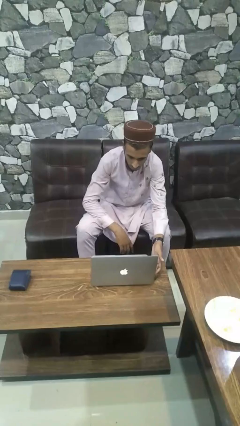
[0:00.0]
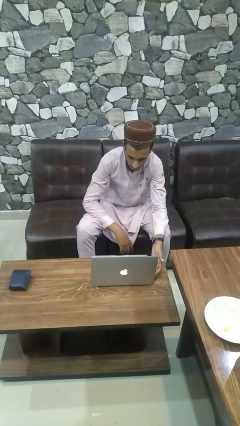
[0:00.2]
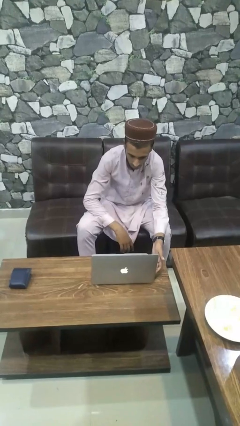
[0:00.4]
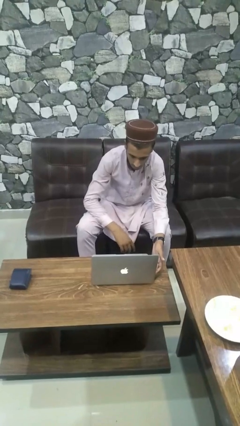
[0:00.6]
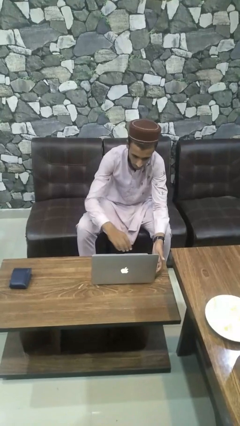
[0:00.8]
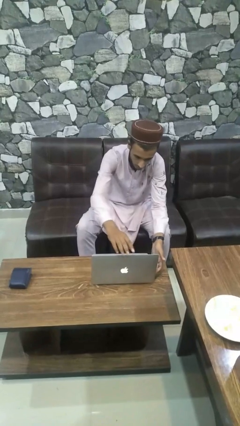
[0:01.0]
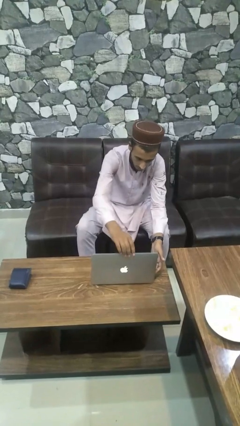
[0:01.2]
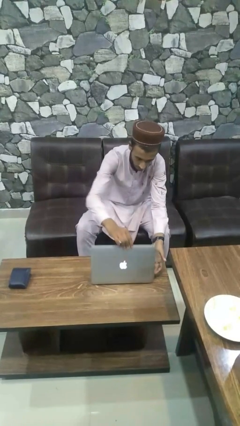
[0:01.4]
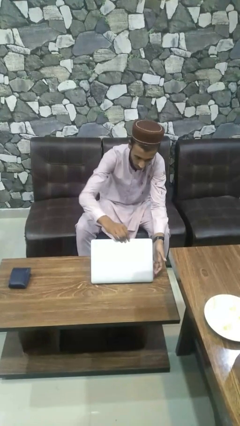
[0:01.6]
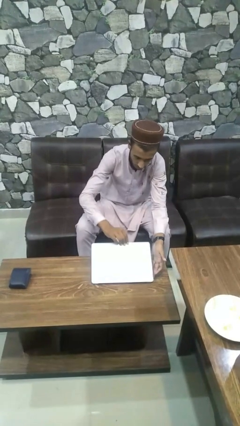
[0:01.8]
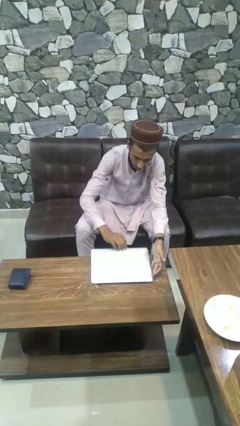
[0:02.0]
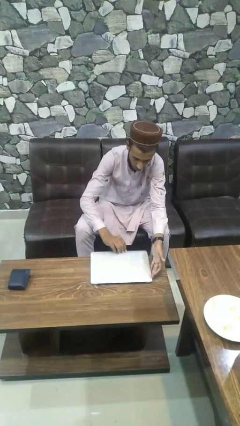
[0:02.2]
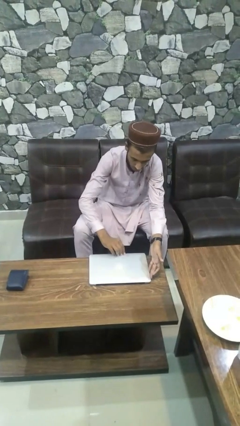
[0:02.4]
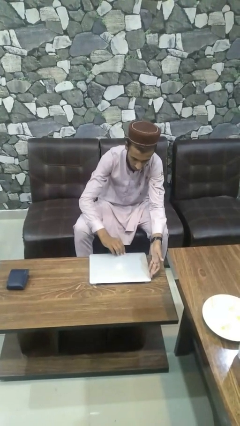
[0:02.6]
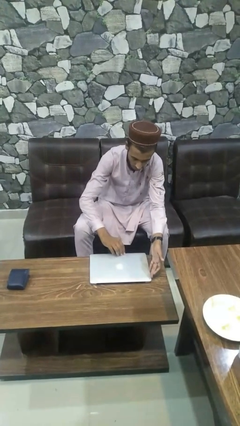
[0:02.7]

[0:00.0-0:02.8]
person closes laptop

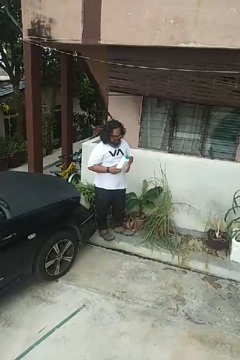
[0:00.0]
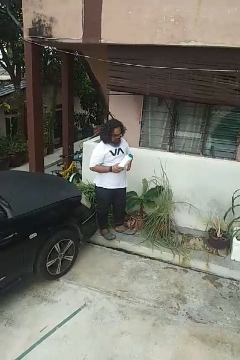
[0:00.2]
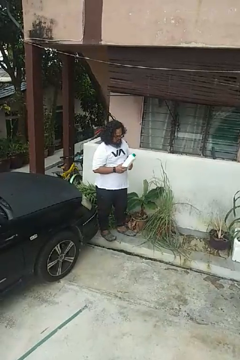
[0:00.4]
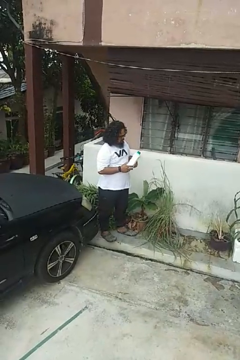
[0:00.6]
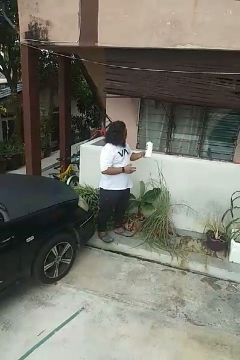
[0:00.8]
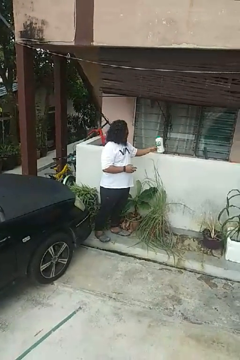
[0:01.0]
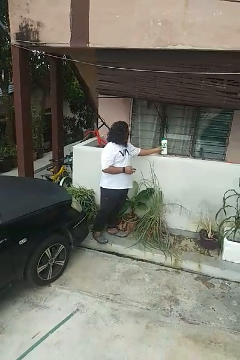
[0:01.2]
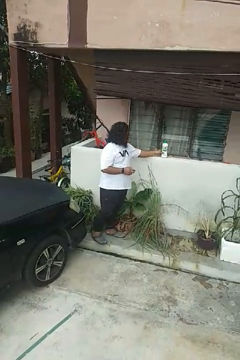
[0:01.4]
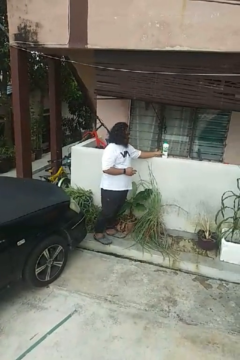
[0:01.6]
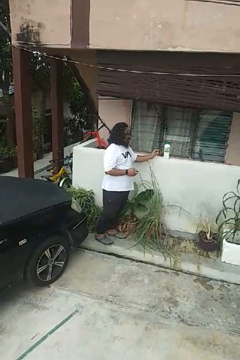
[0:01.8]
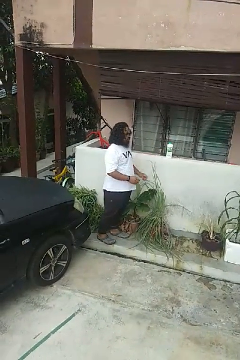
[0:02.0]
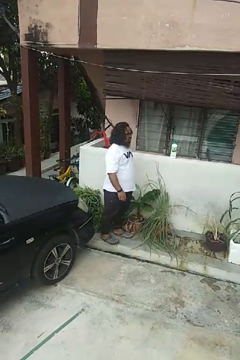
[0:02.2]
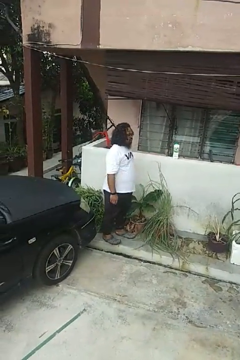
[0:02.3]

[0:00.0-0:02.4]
person puts down object on countertop

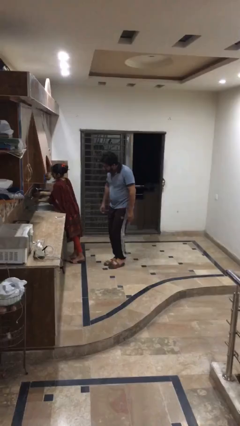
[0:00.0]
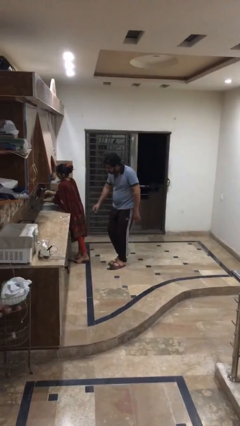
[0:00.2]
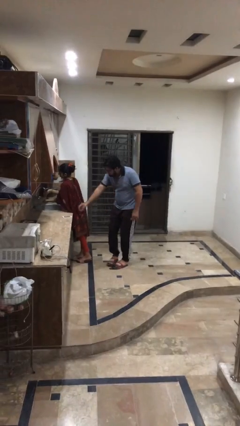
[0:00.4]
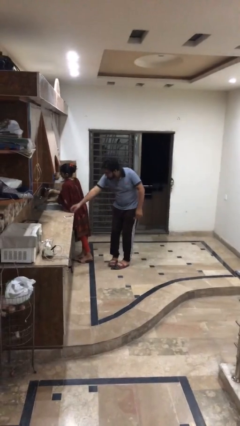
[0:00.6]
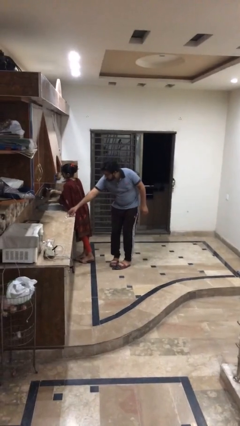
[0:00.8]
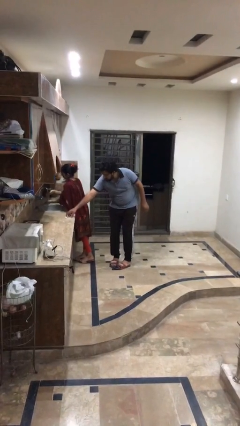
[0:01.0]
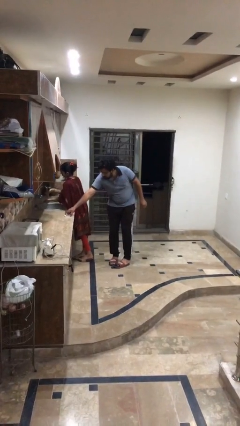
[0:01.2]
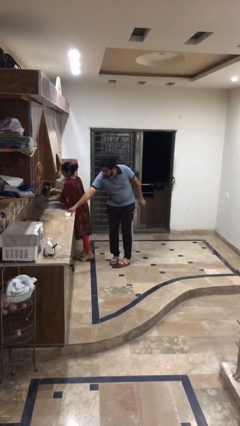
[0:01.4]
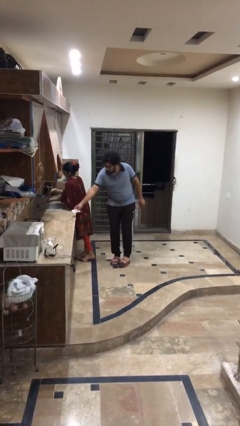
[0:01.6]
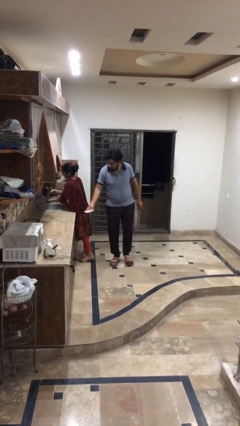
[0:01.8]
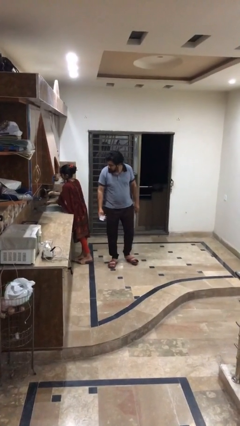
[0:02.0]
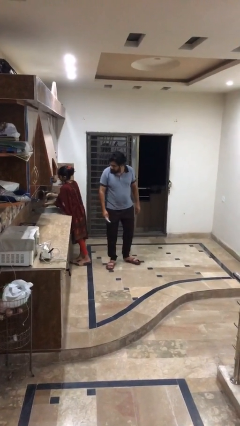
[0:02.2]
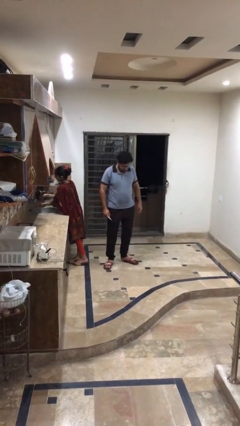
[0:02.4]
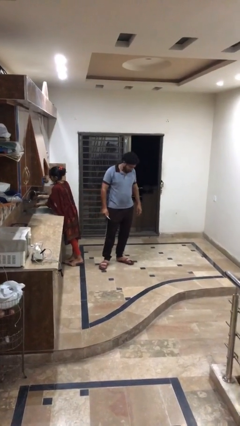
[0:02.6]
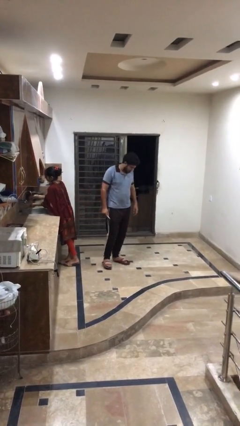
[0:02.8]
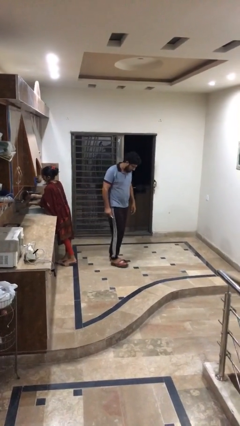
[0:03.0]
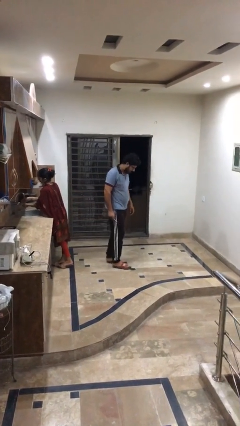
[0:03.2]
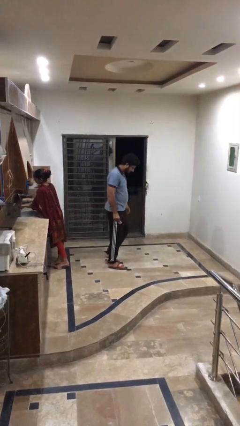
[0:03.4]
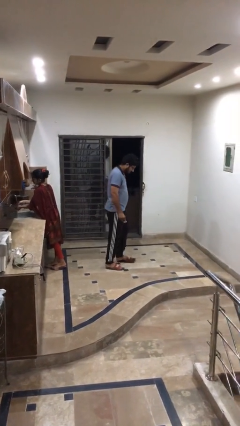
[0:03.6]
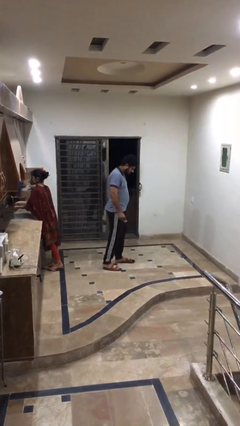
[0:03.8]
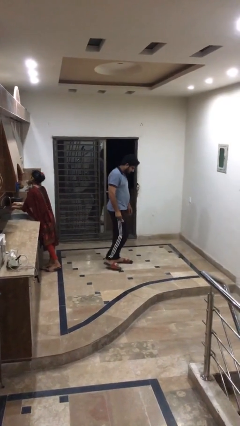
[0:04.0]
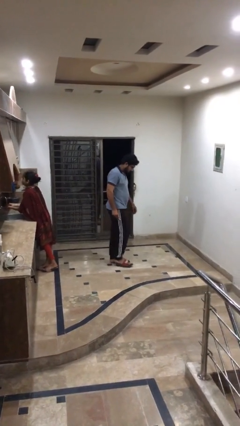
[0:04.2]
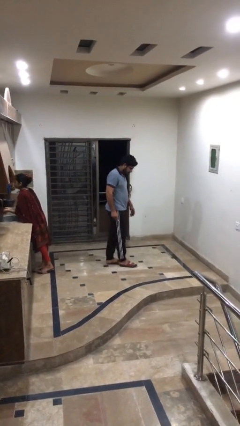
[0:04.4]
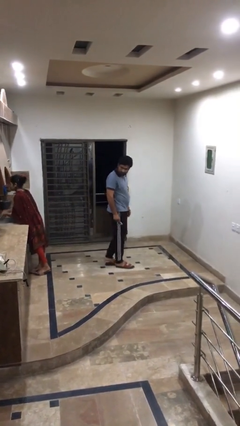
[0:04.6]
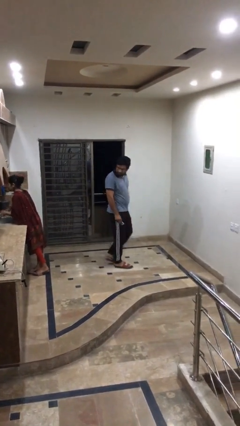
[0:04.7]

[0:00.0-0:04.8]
person steals object from person

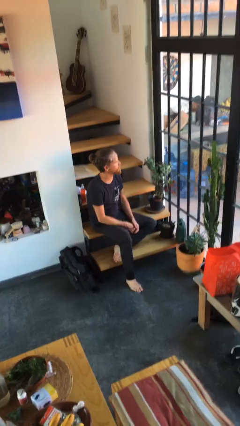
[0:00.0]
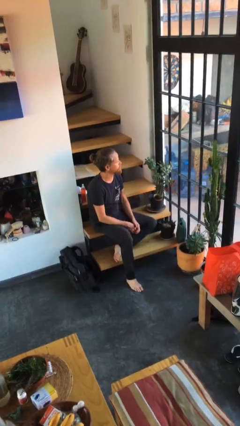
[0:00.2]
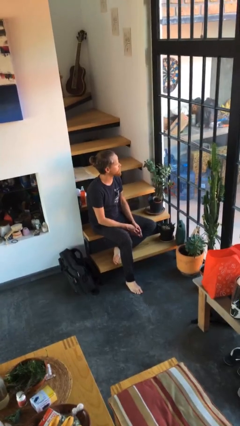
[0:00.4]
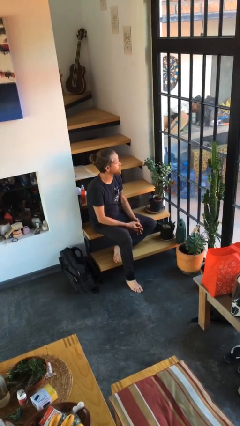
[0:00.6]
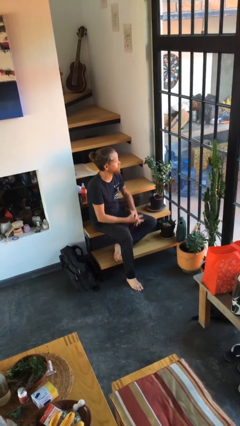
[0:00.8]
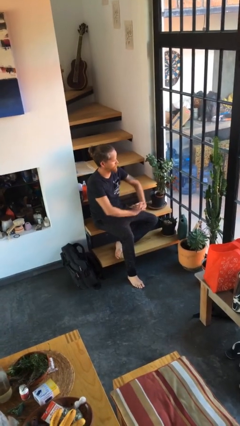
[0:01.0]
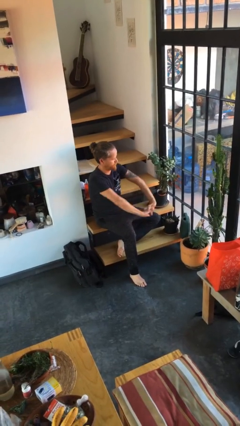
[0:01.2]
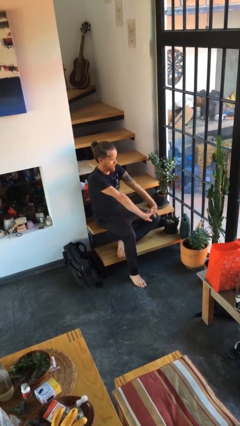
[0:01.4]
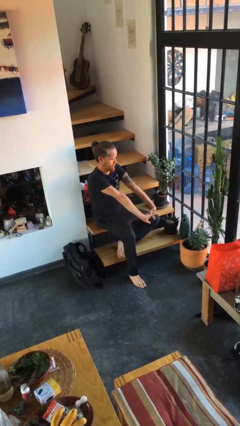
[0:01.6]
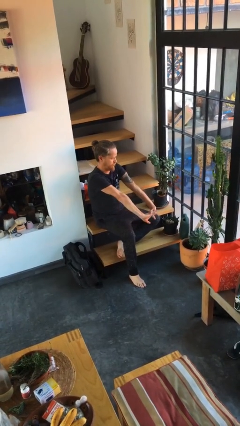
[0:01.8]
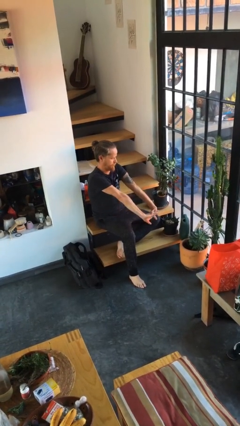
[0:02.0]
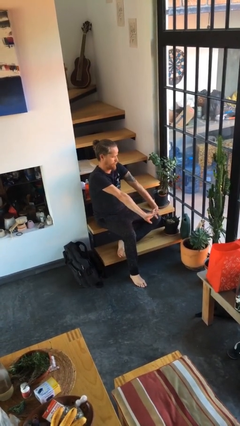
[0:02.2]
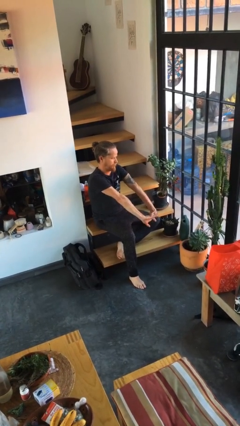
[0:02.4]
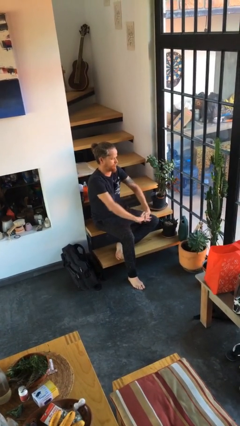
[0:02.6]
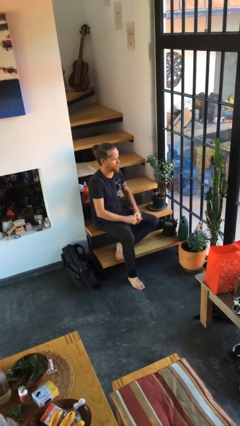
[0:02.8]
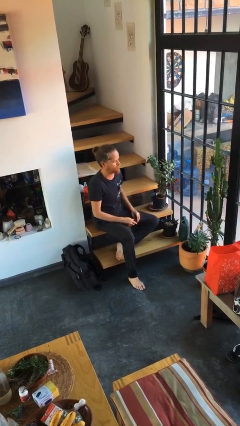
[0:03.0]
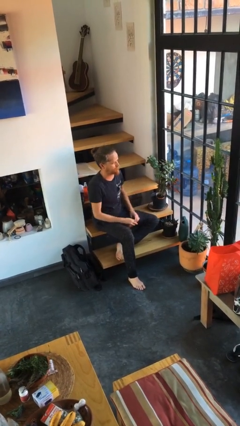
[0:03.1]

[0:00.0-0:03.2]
person cracks knuckles

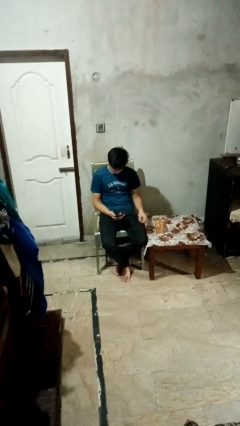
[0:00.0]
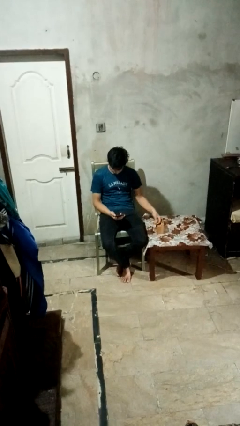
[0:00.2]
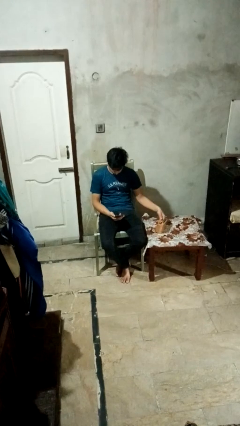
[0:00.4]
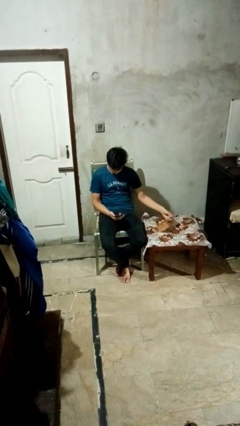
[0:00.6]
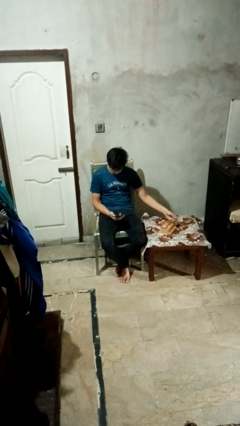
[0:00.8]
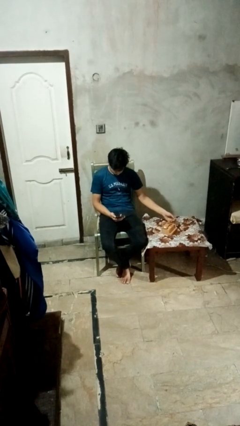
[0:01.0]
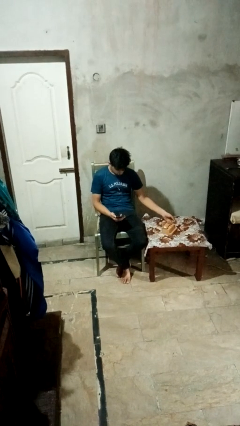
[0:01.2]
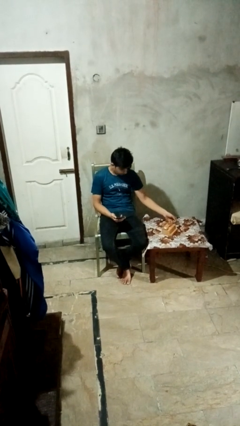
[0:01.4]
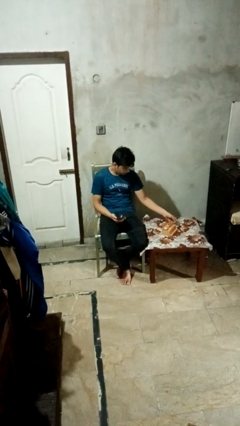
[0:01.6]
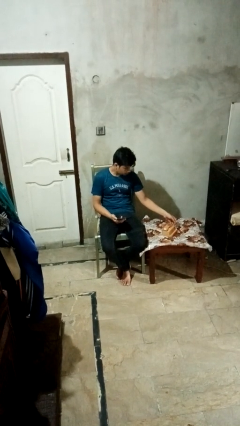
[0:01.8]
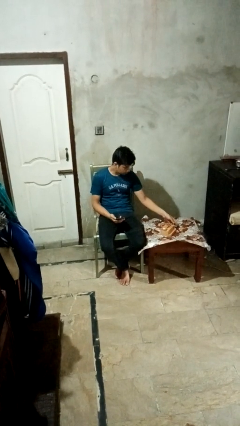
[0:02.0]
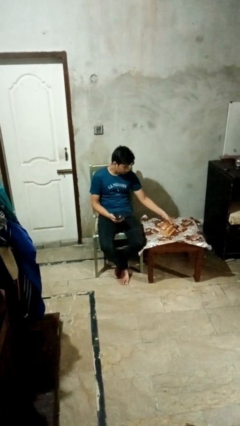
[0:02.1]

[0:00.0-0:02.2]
person knocks over furniture

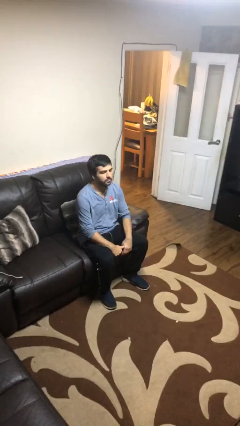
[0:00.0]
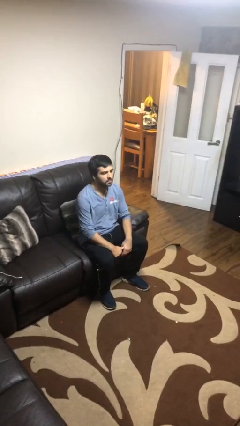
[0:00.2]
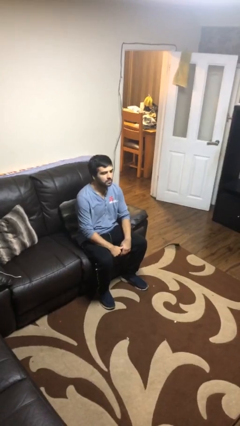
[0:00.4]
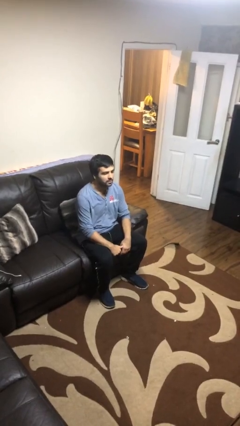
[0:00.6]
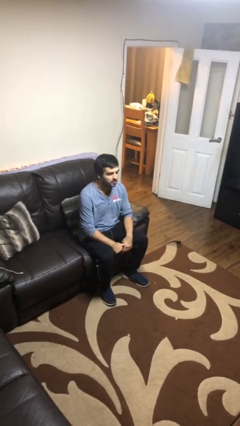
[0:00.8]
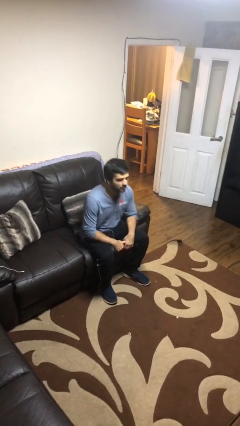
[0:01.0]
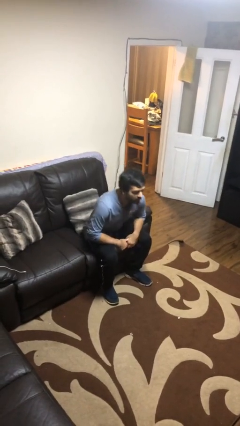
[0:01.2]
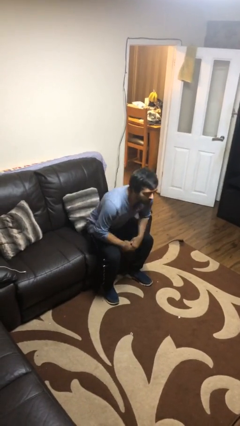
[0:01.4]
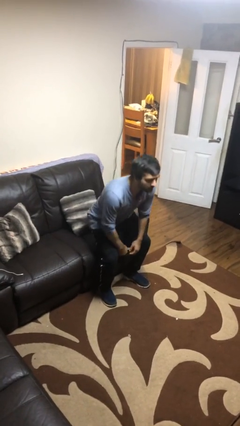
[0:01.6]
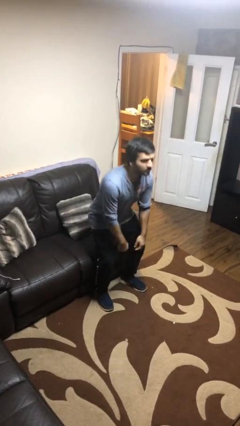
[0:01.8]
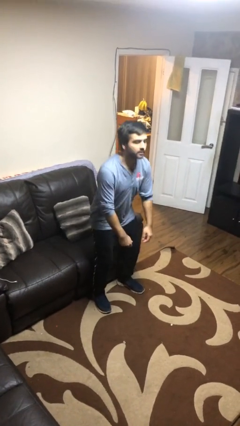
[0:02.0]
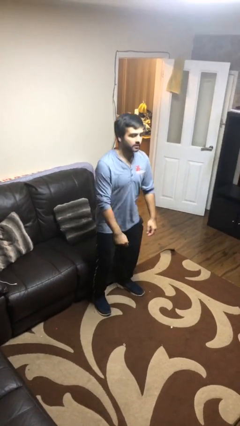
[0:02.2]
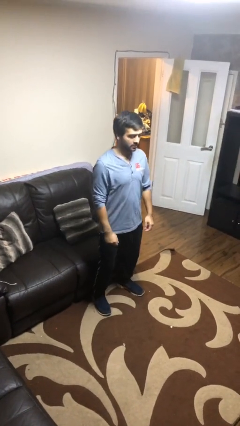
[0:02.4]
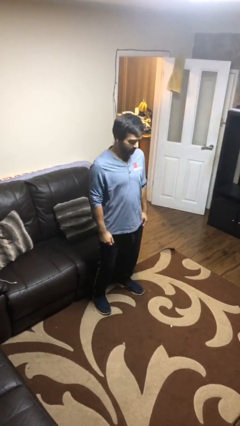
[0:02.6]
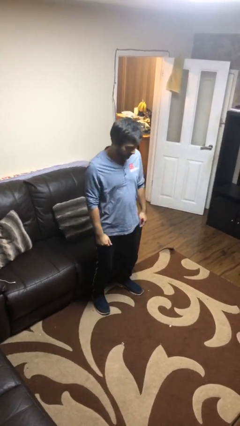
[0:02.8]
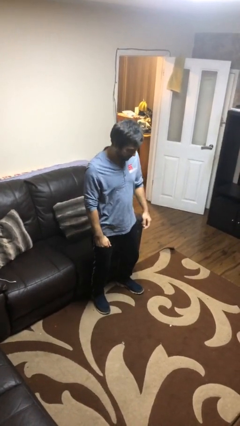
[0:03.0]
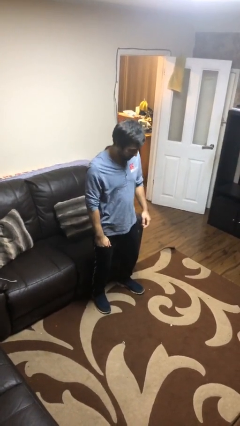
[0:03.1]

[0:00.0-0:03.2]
person stands up
